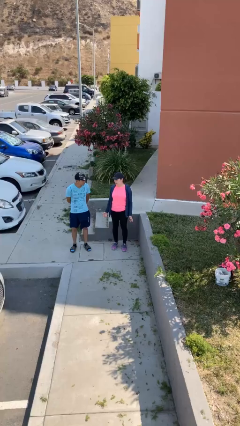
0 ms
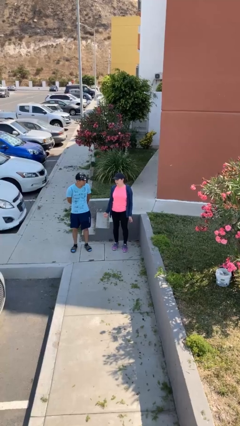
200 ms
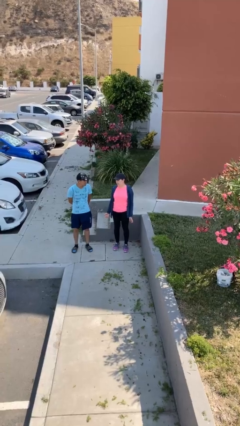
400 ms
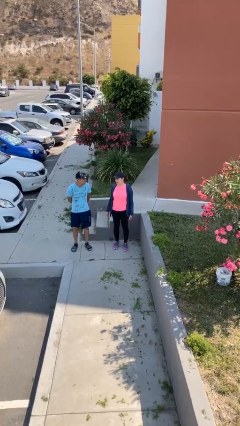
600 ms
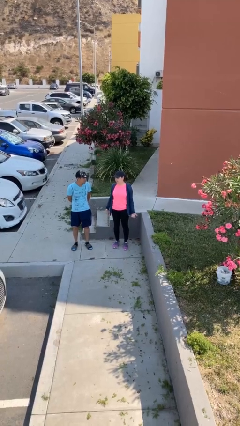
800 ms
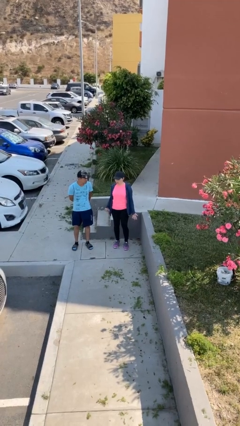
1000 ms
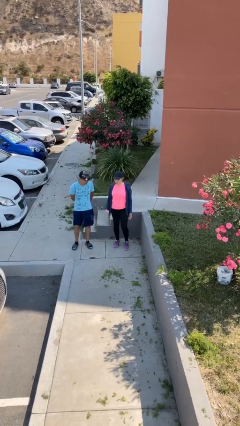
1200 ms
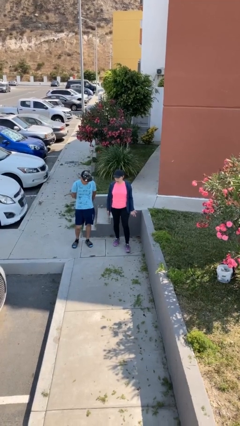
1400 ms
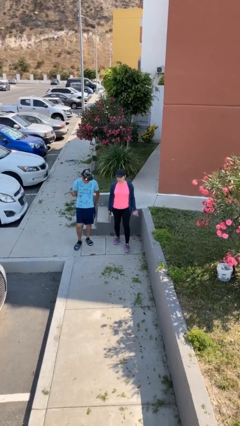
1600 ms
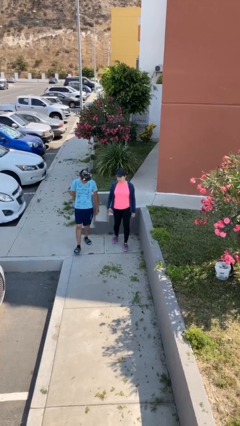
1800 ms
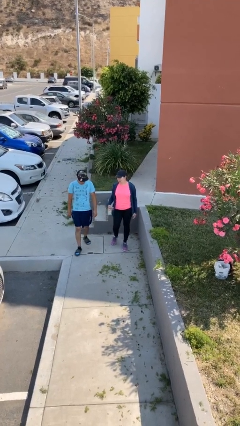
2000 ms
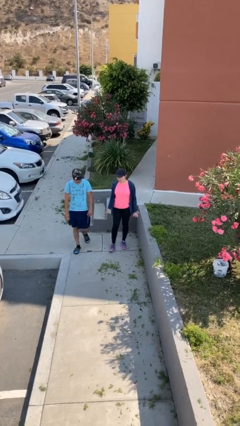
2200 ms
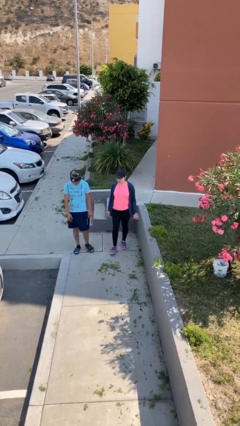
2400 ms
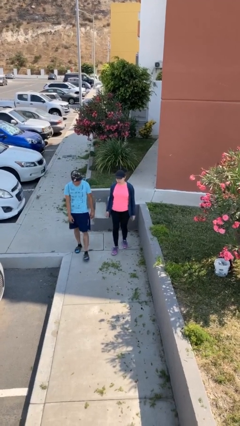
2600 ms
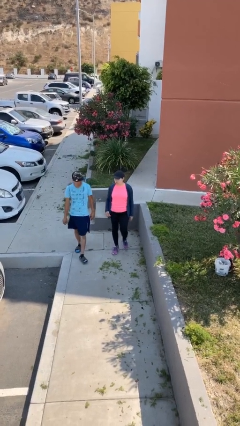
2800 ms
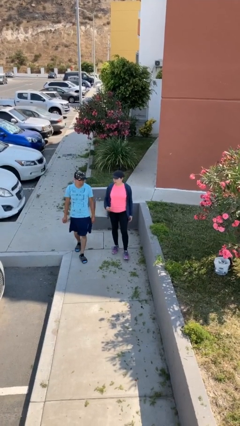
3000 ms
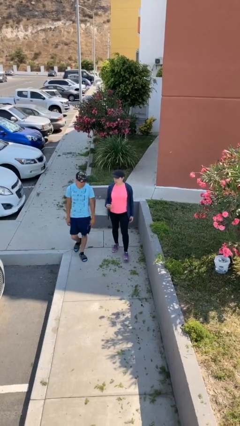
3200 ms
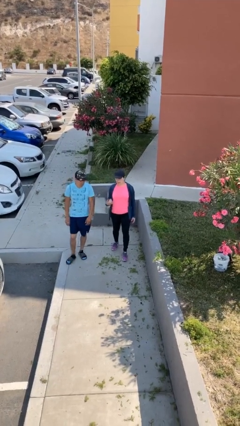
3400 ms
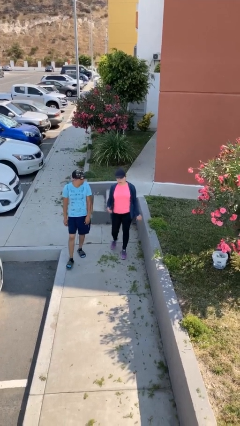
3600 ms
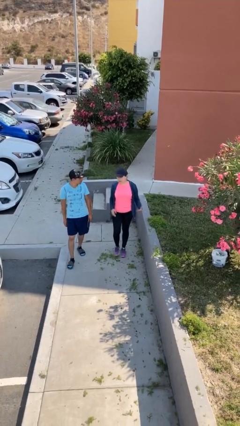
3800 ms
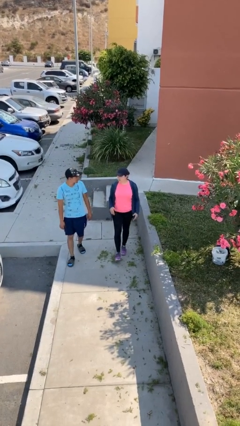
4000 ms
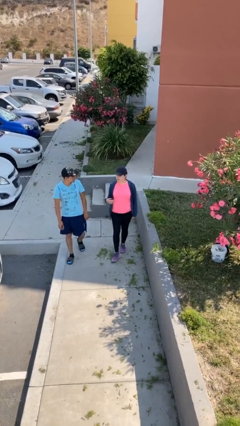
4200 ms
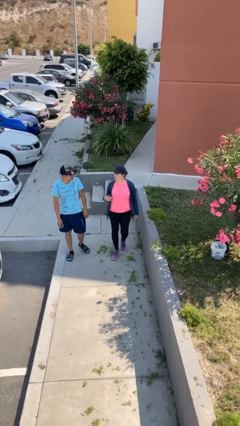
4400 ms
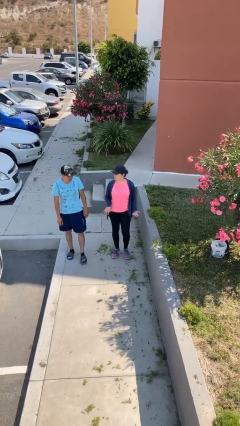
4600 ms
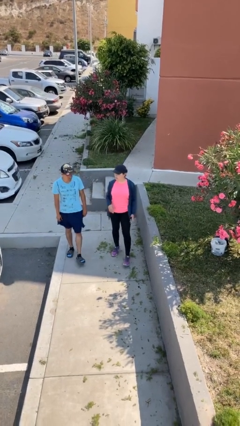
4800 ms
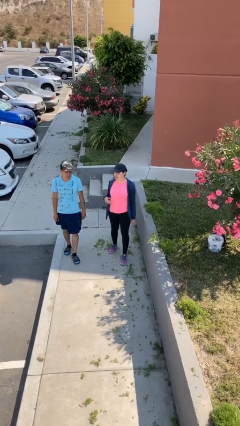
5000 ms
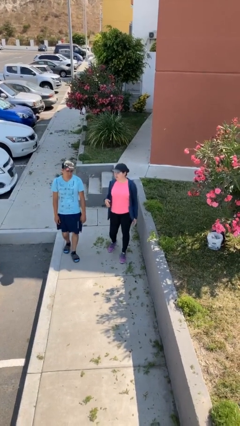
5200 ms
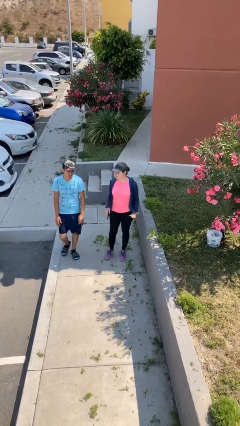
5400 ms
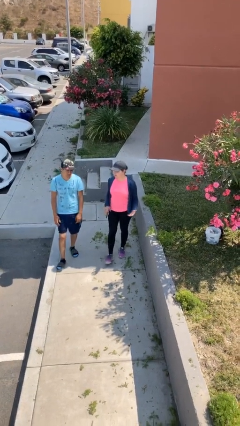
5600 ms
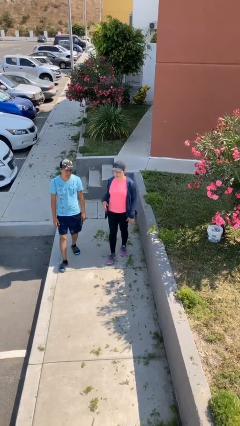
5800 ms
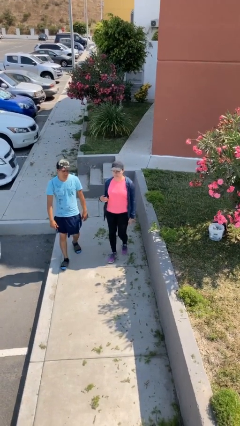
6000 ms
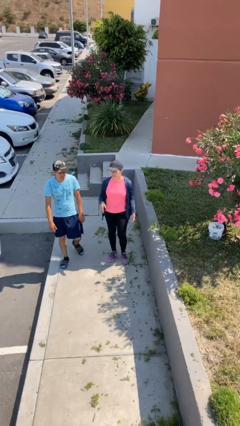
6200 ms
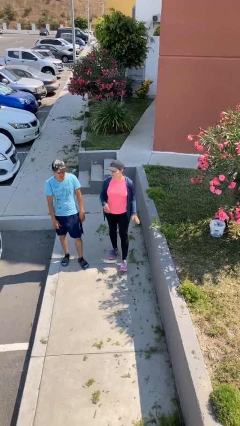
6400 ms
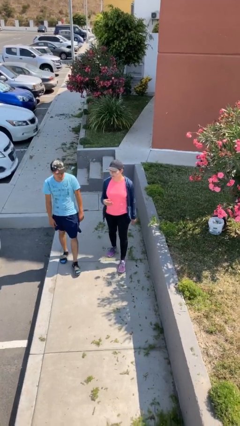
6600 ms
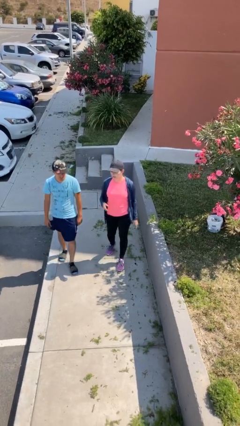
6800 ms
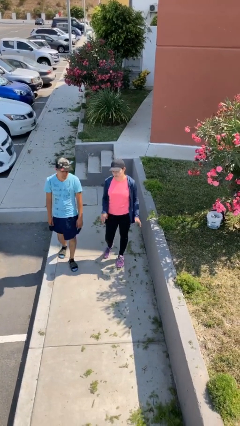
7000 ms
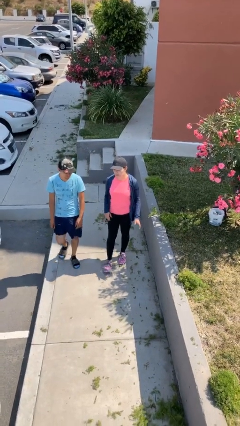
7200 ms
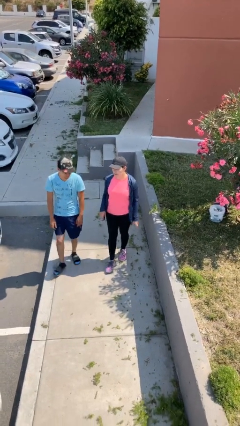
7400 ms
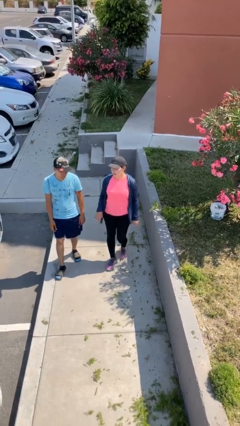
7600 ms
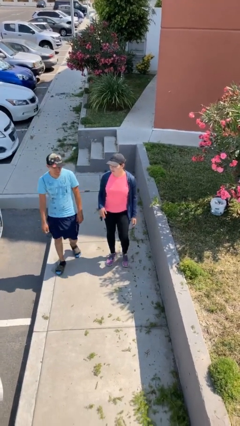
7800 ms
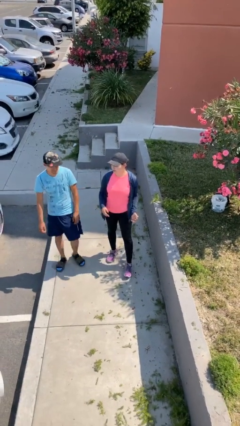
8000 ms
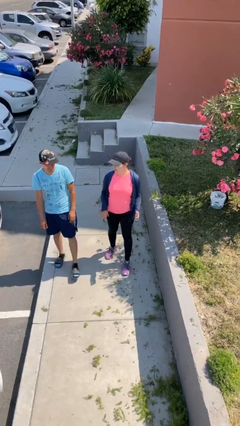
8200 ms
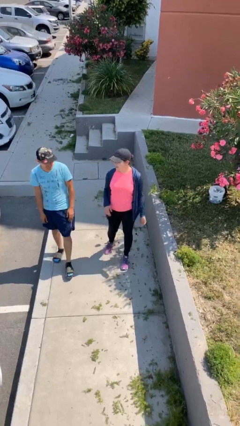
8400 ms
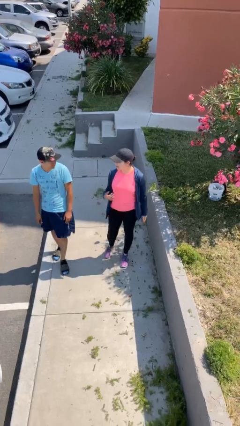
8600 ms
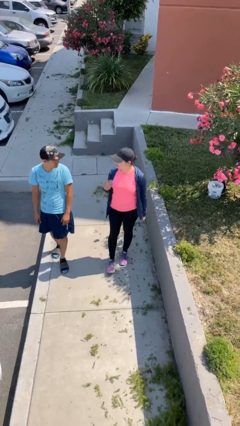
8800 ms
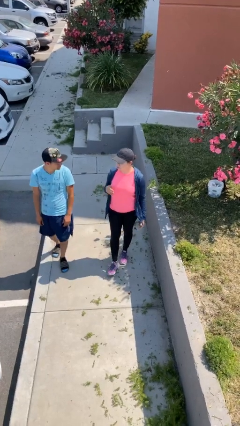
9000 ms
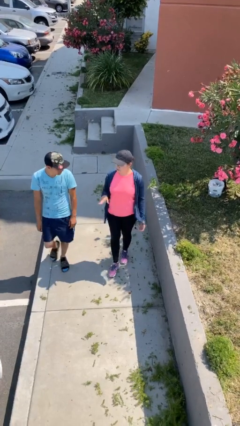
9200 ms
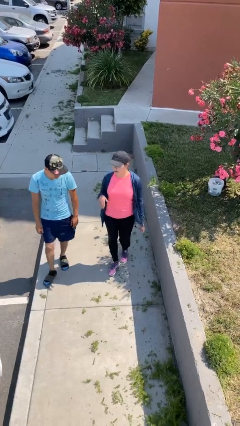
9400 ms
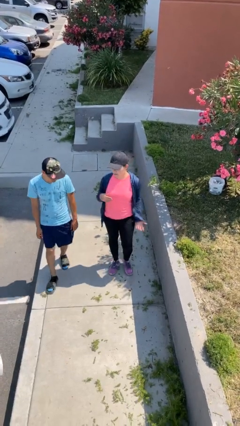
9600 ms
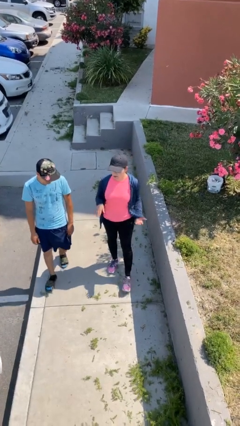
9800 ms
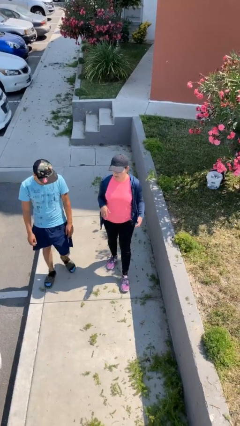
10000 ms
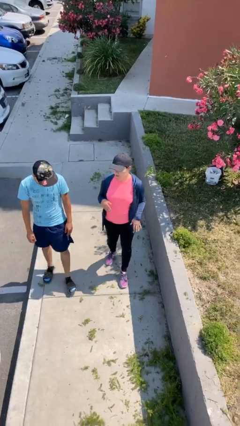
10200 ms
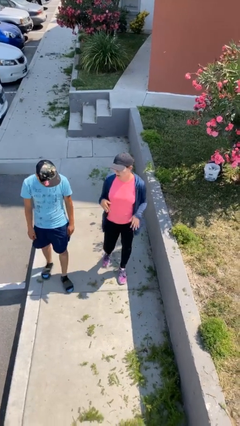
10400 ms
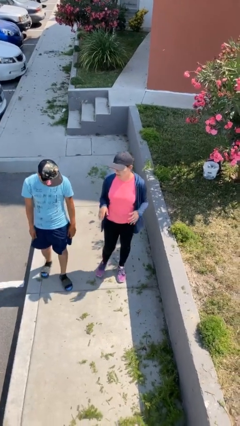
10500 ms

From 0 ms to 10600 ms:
person talks to person

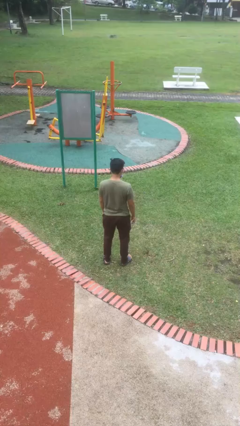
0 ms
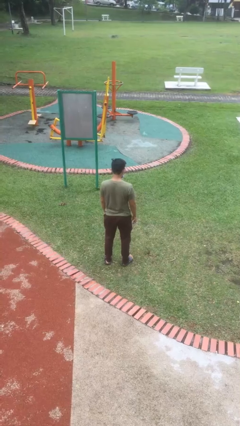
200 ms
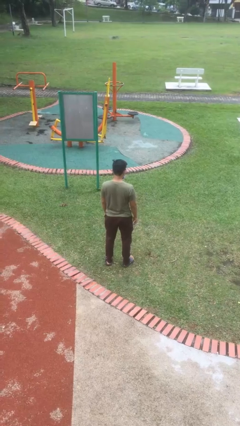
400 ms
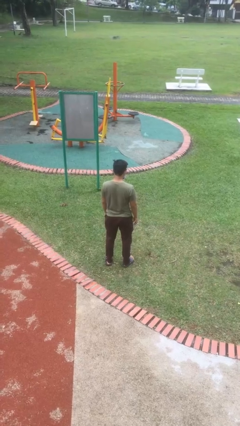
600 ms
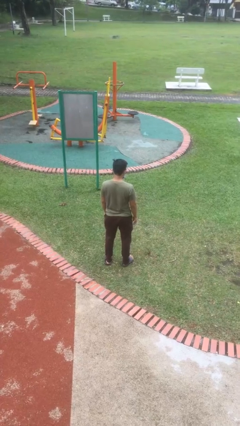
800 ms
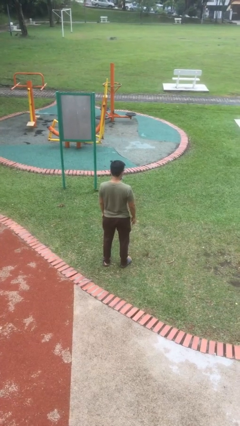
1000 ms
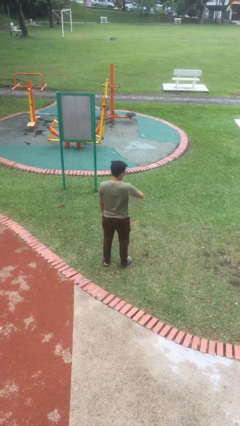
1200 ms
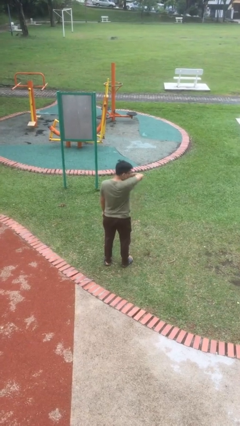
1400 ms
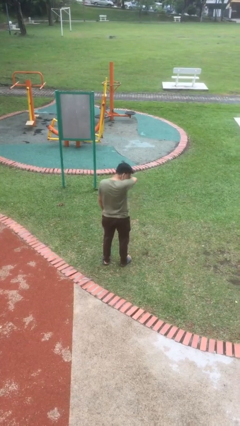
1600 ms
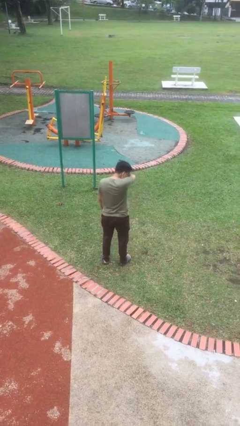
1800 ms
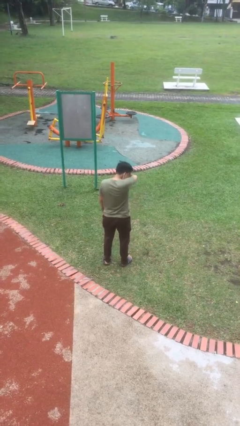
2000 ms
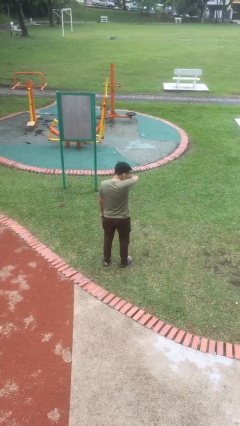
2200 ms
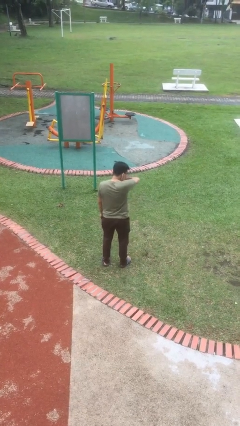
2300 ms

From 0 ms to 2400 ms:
person sneezes into arm

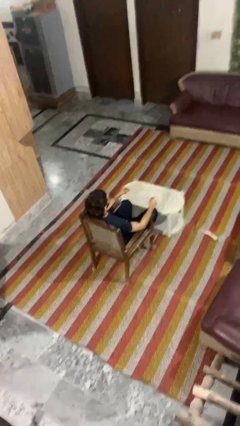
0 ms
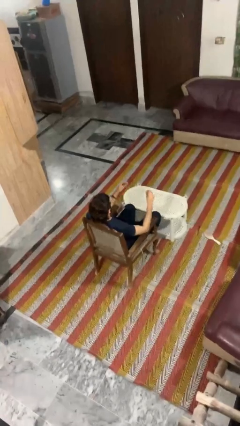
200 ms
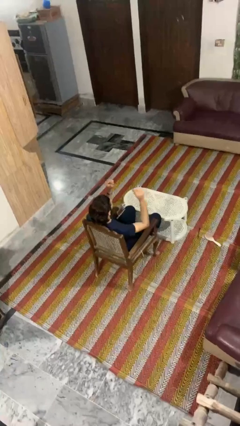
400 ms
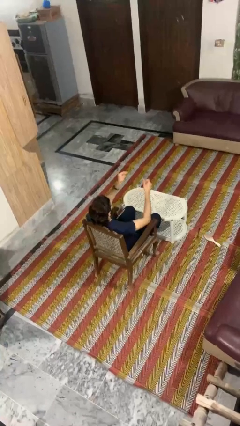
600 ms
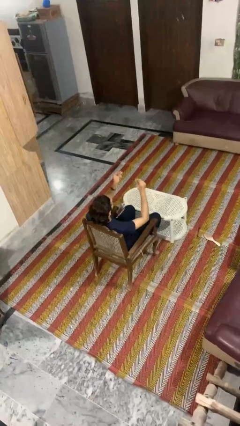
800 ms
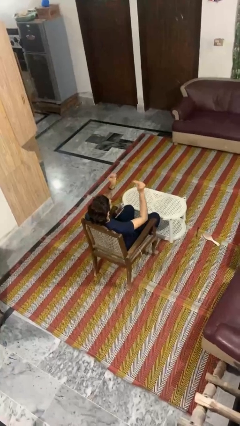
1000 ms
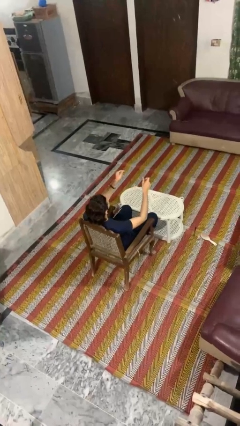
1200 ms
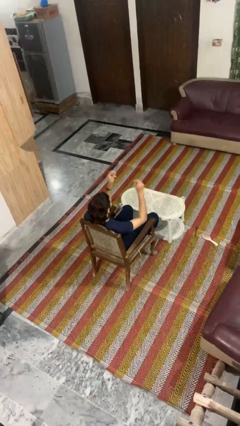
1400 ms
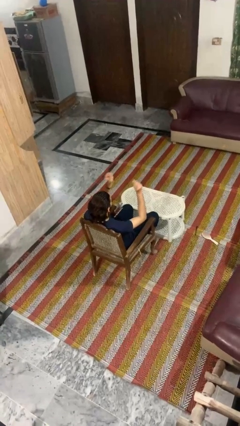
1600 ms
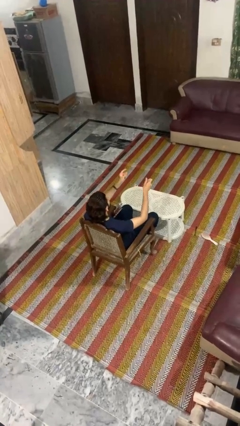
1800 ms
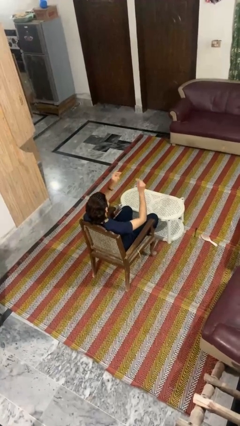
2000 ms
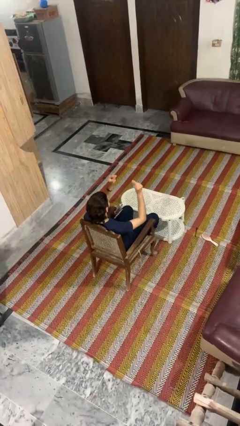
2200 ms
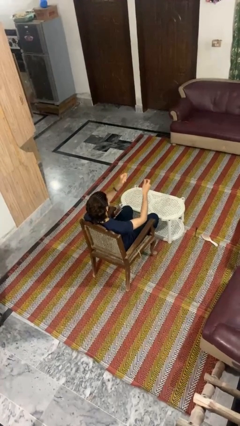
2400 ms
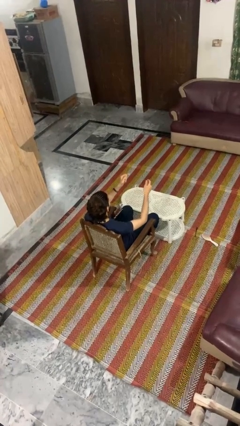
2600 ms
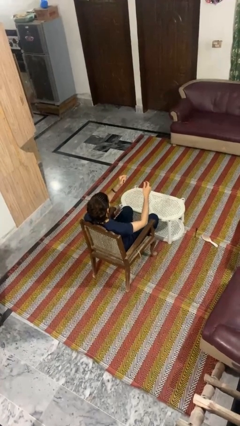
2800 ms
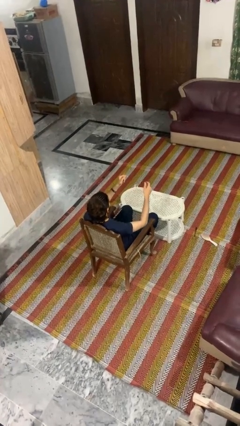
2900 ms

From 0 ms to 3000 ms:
person snaps fingers

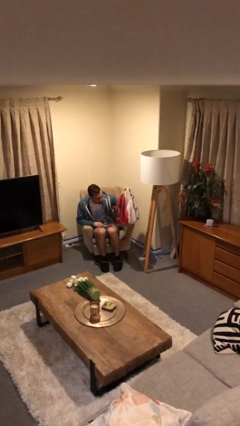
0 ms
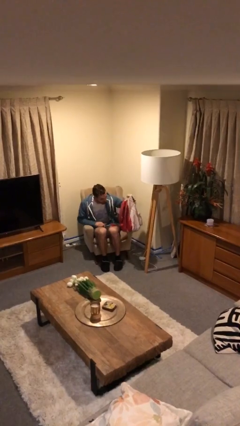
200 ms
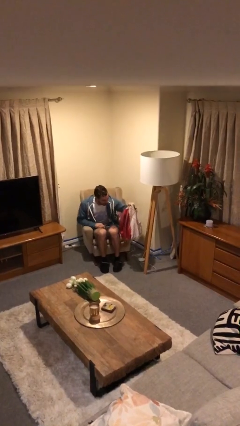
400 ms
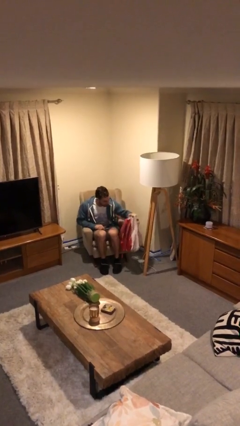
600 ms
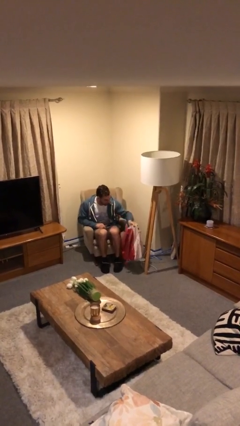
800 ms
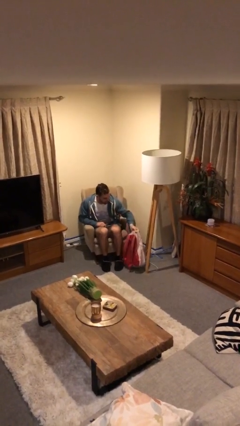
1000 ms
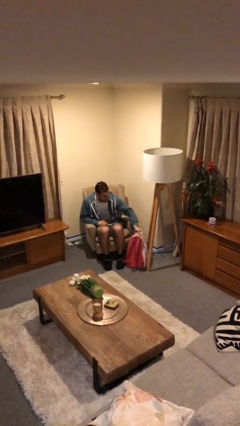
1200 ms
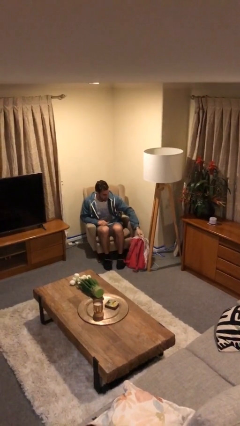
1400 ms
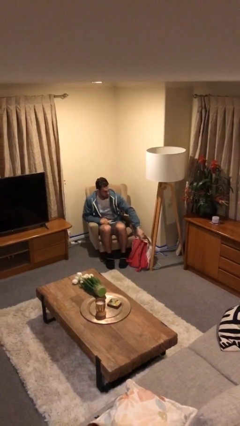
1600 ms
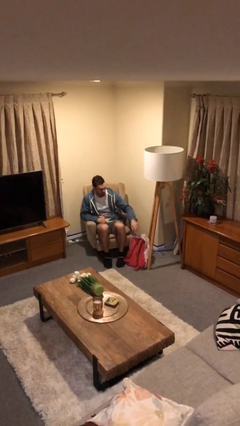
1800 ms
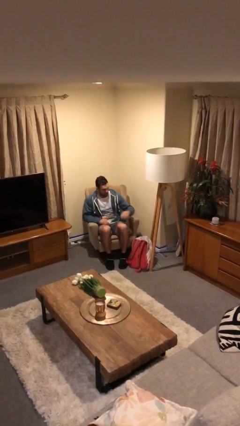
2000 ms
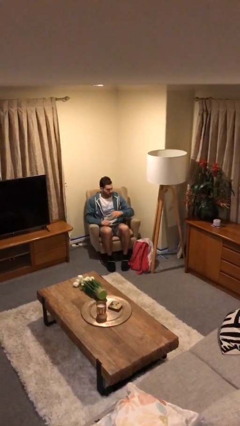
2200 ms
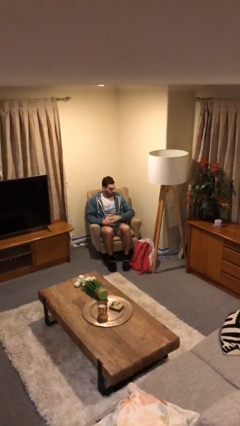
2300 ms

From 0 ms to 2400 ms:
person puts down object on floor
